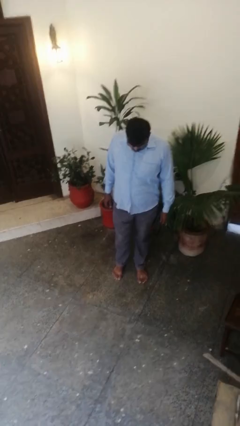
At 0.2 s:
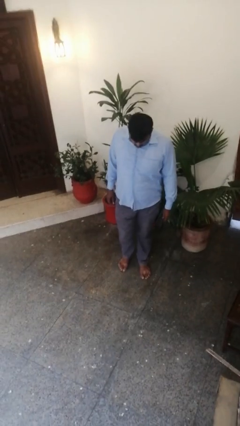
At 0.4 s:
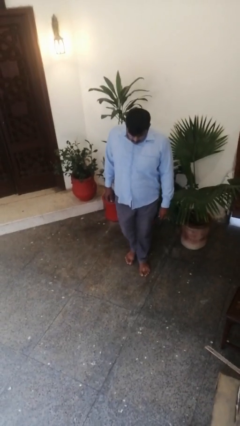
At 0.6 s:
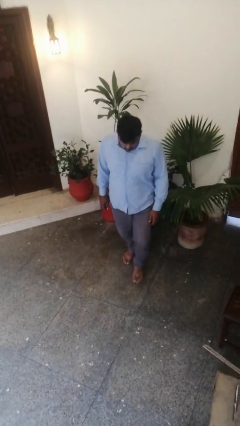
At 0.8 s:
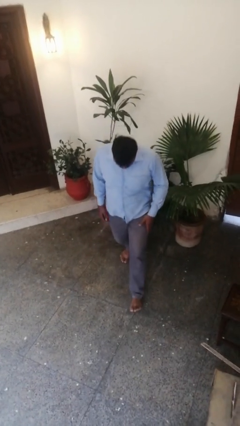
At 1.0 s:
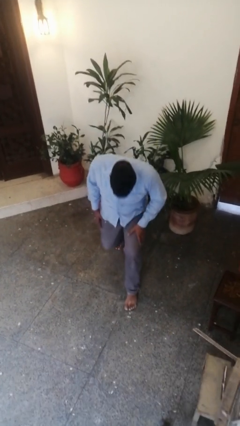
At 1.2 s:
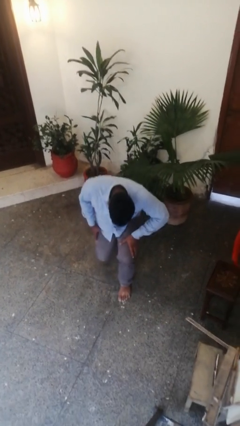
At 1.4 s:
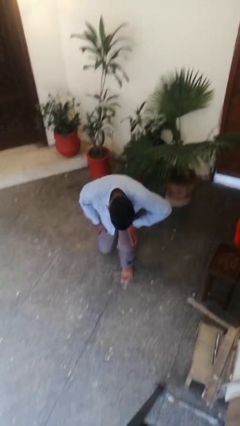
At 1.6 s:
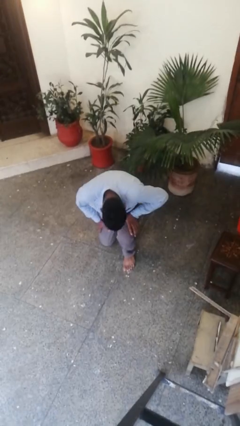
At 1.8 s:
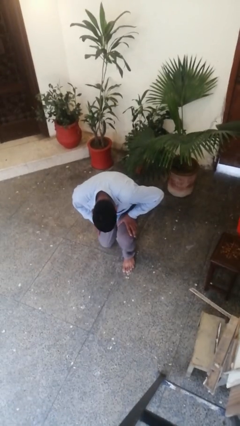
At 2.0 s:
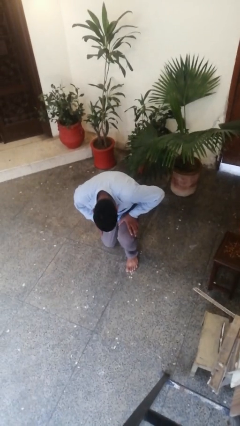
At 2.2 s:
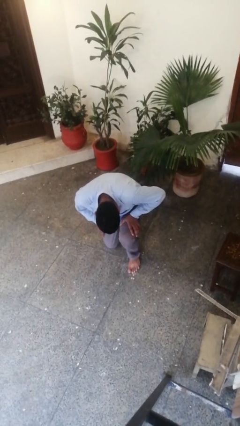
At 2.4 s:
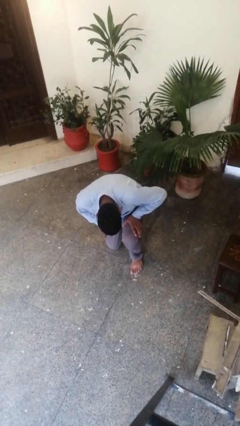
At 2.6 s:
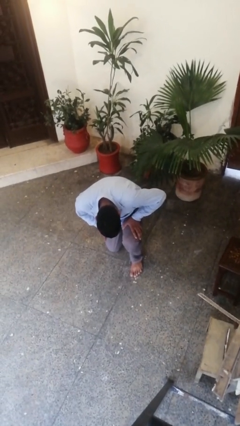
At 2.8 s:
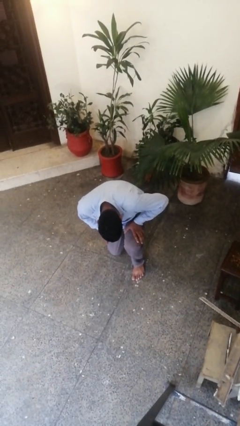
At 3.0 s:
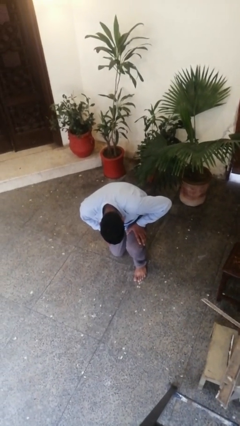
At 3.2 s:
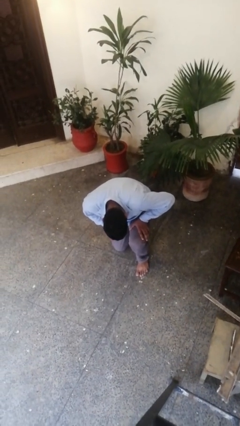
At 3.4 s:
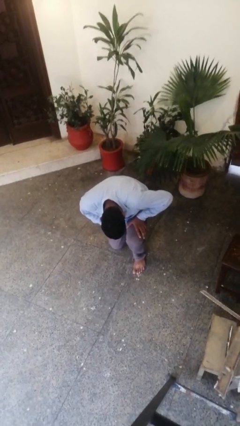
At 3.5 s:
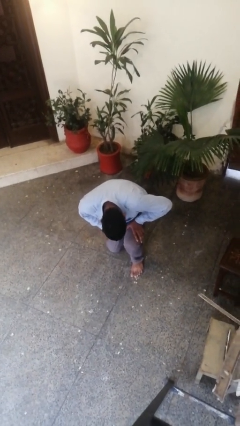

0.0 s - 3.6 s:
person kneels

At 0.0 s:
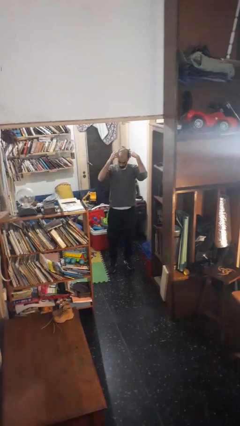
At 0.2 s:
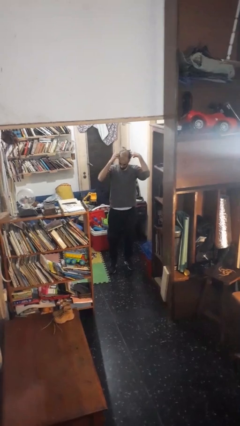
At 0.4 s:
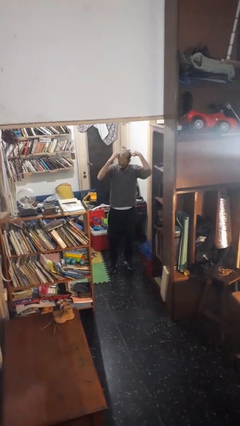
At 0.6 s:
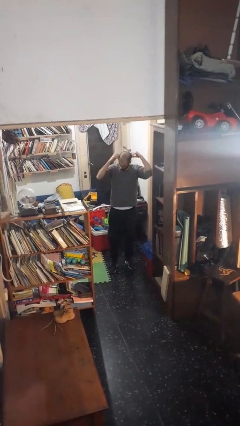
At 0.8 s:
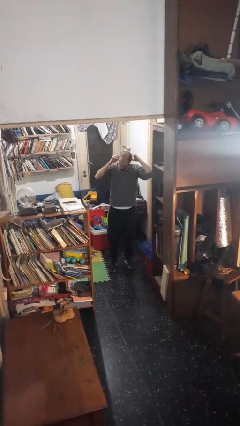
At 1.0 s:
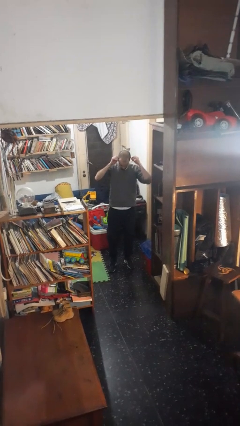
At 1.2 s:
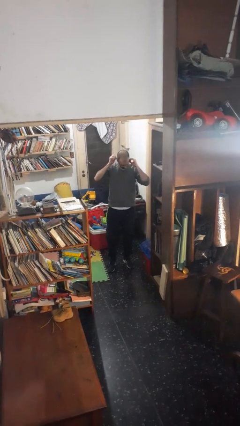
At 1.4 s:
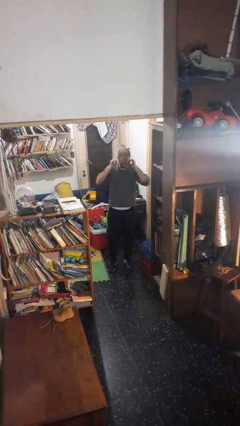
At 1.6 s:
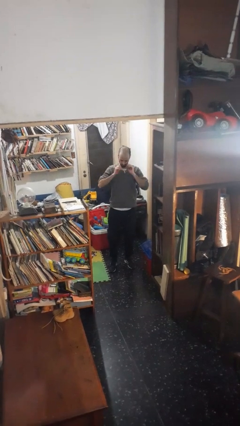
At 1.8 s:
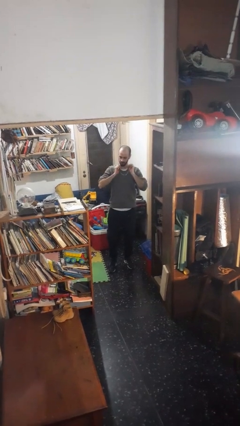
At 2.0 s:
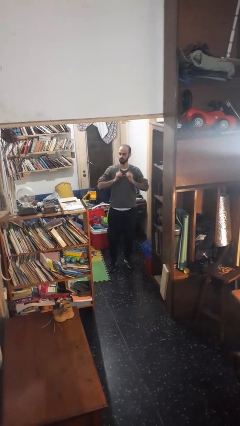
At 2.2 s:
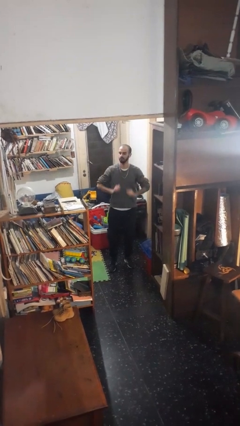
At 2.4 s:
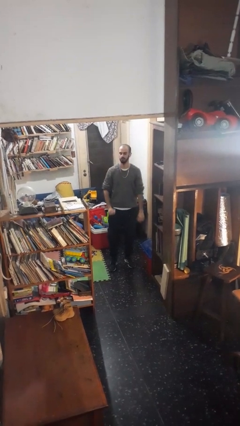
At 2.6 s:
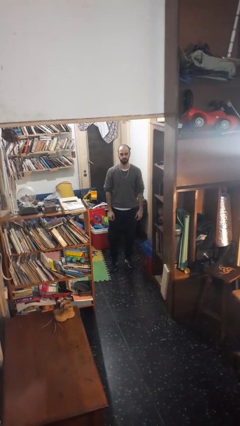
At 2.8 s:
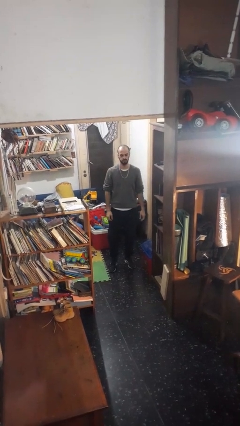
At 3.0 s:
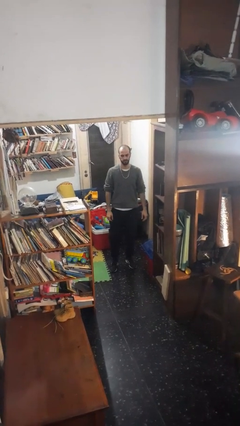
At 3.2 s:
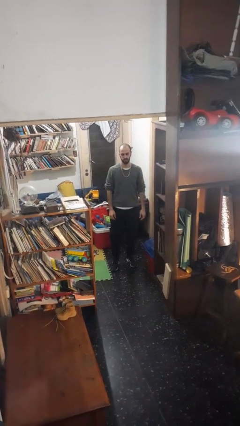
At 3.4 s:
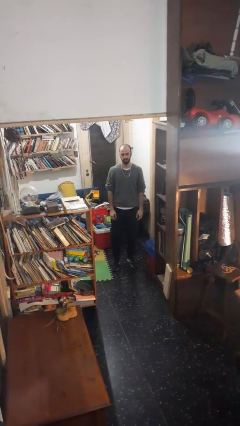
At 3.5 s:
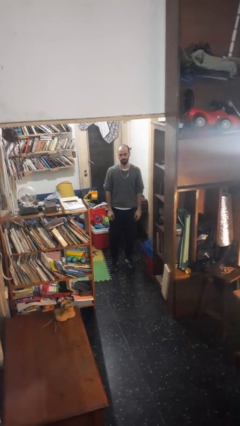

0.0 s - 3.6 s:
person puts on necklace

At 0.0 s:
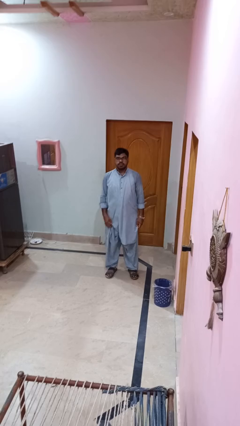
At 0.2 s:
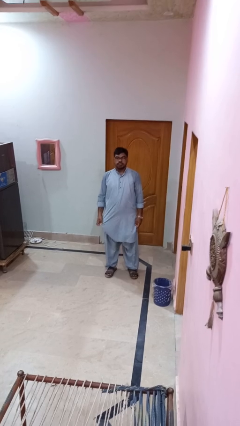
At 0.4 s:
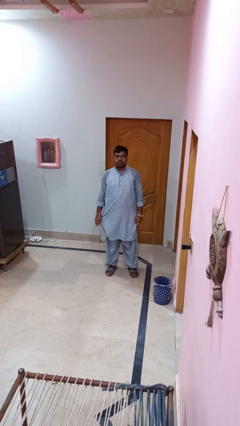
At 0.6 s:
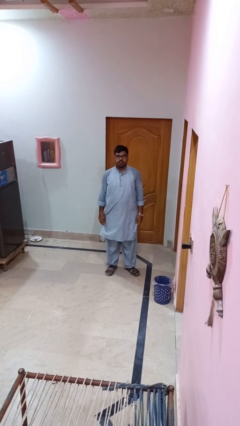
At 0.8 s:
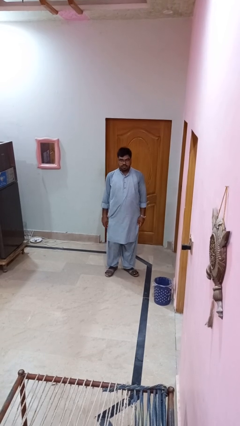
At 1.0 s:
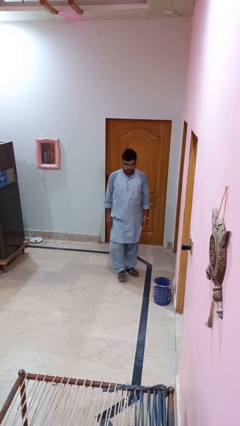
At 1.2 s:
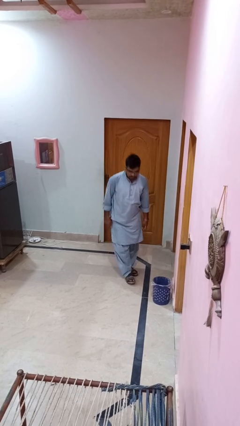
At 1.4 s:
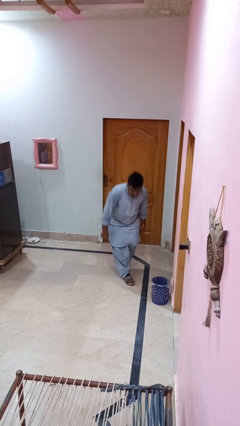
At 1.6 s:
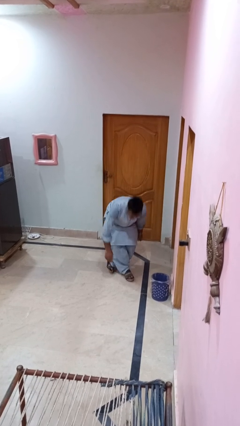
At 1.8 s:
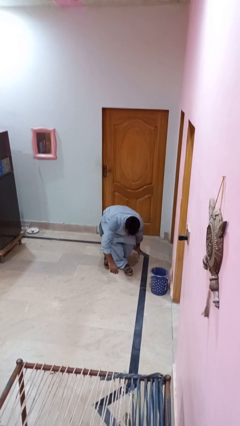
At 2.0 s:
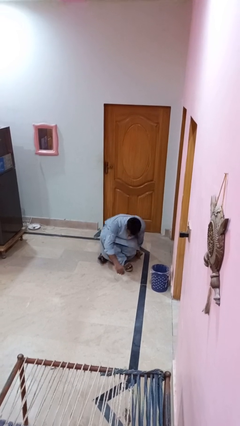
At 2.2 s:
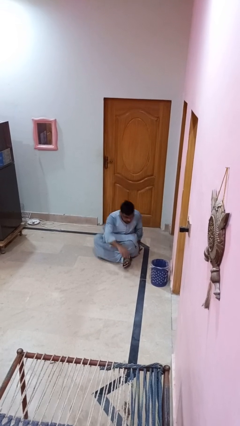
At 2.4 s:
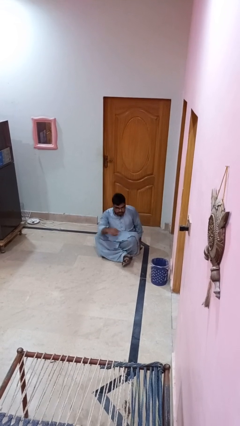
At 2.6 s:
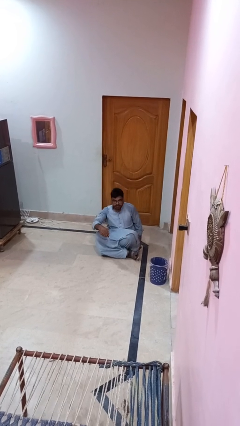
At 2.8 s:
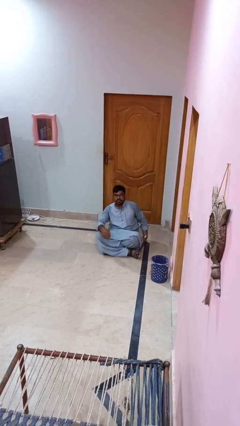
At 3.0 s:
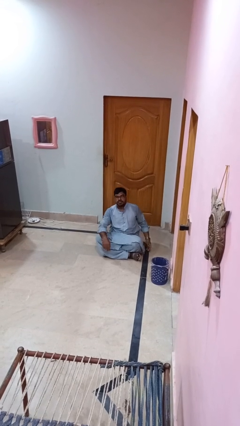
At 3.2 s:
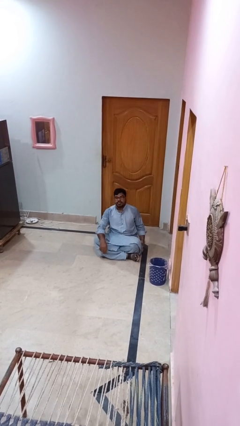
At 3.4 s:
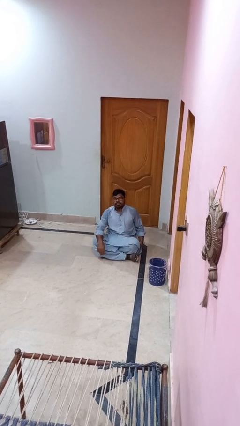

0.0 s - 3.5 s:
person sits crisscross

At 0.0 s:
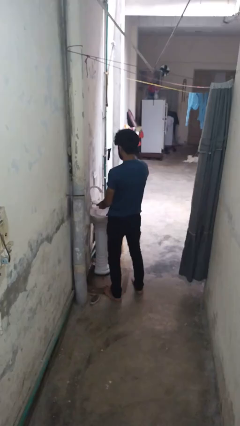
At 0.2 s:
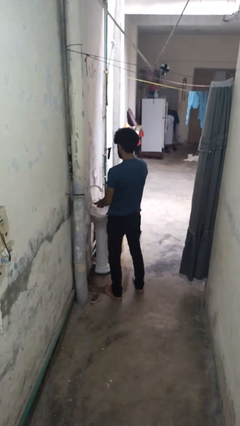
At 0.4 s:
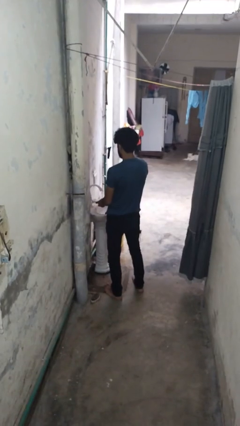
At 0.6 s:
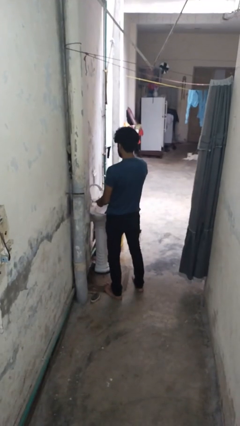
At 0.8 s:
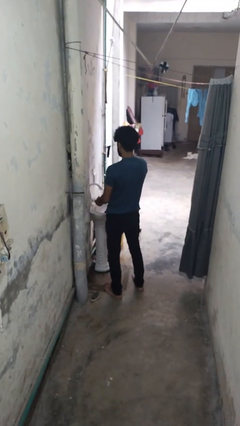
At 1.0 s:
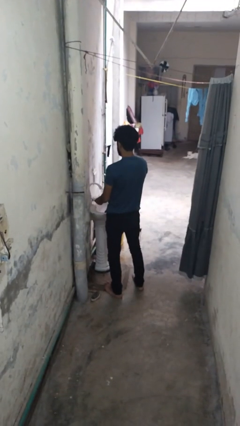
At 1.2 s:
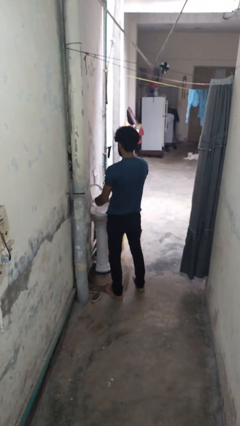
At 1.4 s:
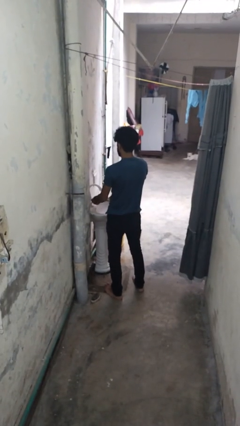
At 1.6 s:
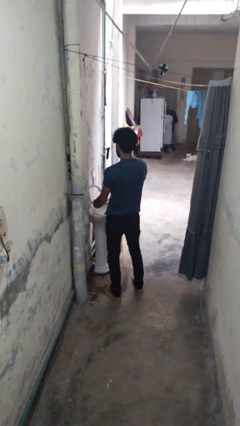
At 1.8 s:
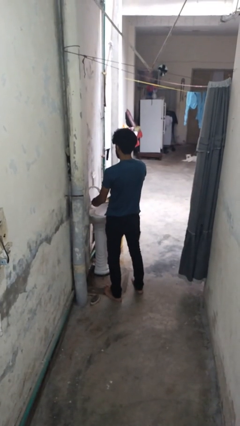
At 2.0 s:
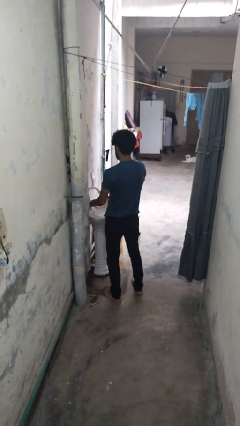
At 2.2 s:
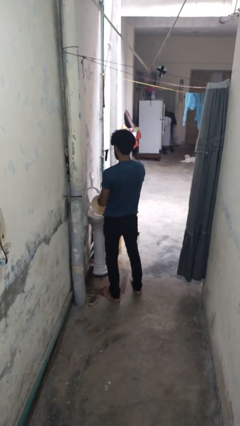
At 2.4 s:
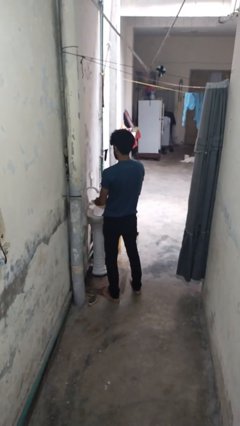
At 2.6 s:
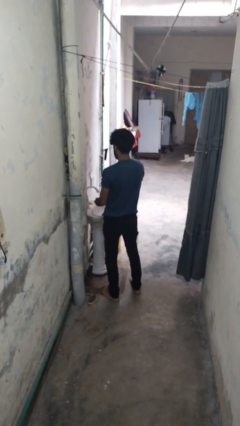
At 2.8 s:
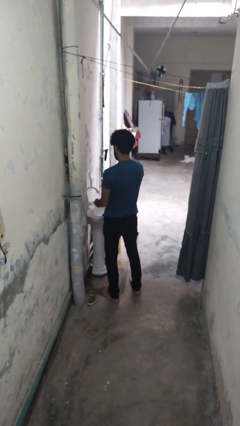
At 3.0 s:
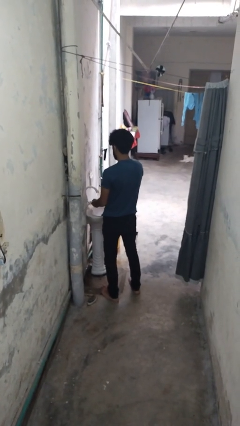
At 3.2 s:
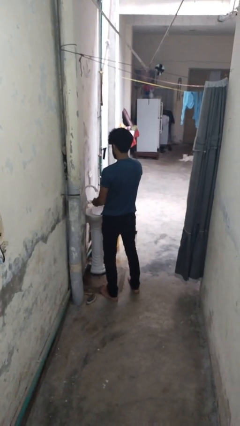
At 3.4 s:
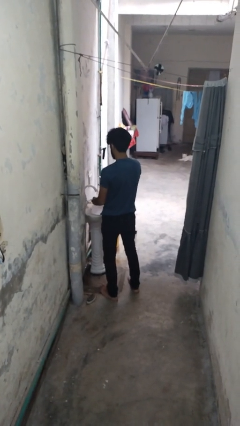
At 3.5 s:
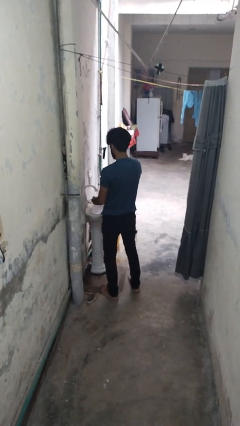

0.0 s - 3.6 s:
person washes dish

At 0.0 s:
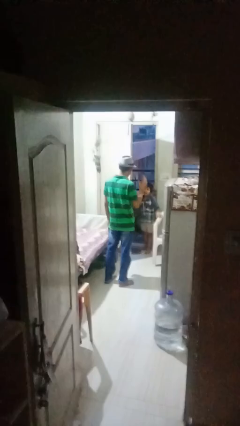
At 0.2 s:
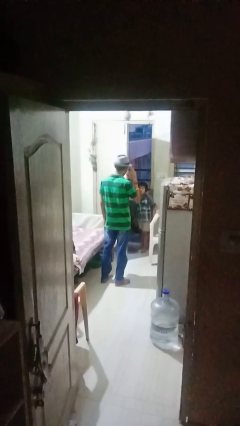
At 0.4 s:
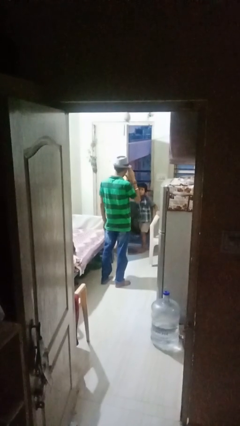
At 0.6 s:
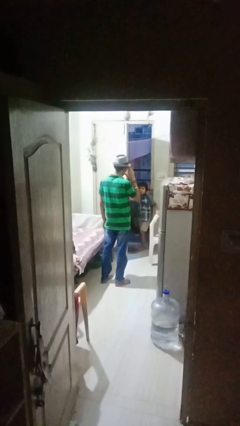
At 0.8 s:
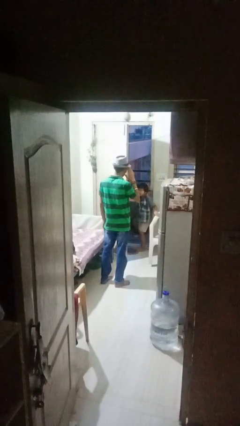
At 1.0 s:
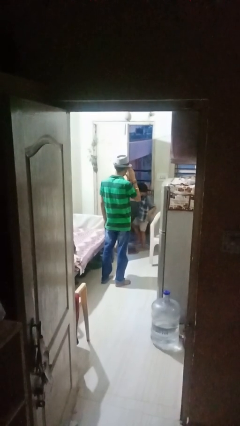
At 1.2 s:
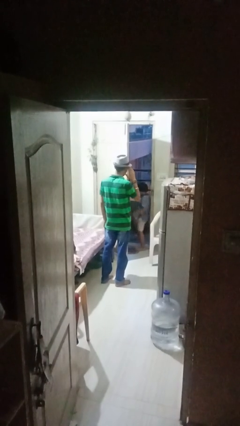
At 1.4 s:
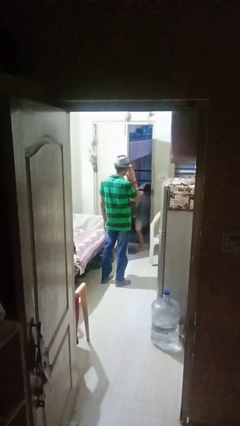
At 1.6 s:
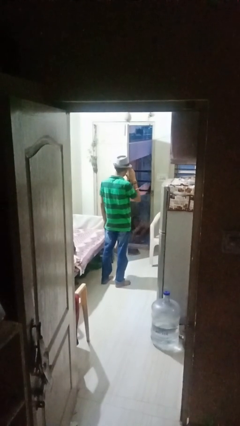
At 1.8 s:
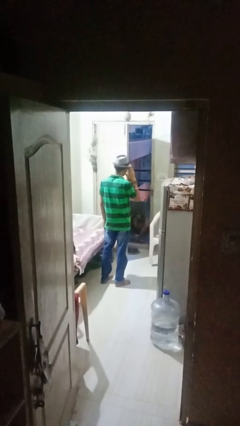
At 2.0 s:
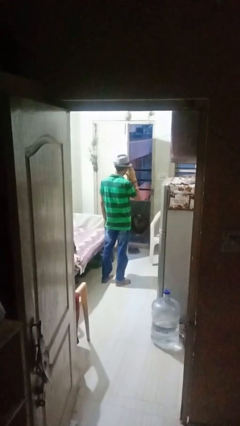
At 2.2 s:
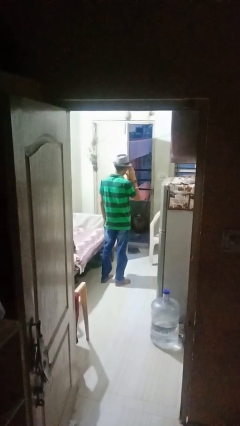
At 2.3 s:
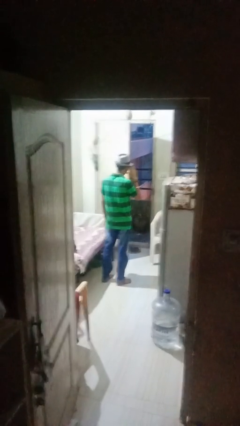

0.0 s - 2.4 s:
person salutes

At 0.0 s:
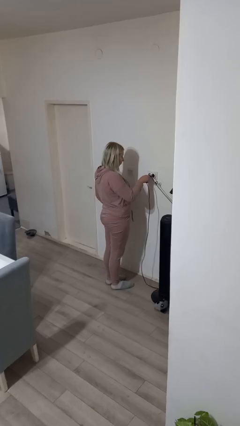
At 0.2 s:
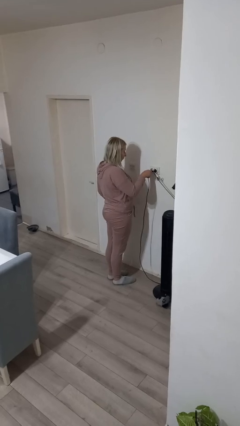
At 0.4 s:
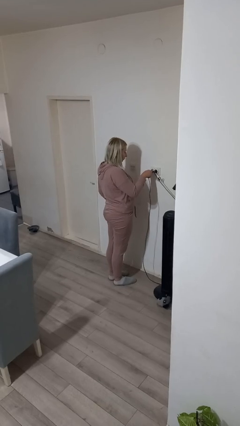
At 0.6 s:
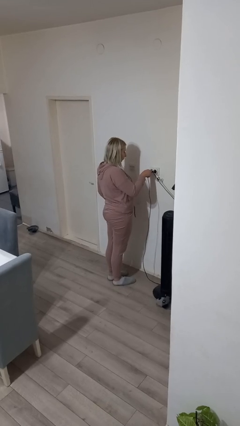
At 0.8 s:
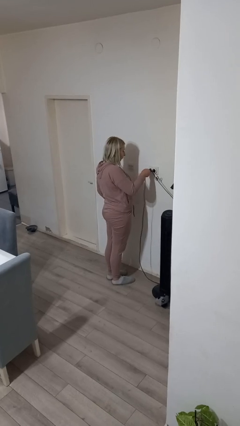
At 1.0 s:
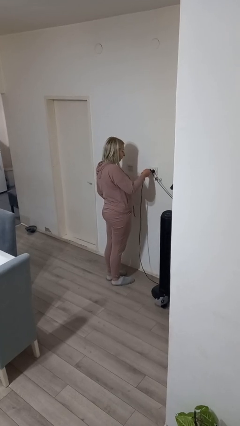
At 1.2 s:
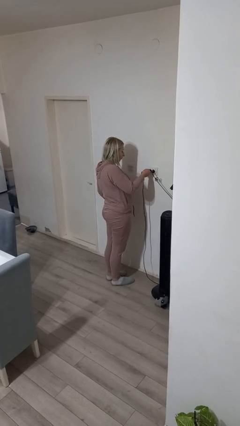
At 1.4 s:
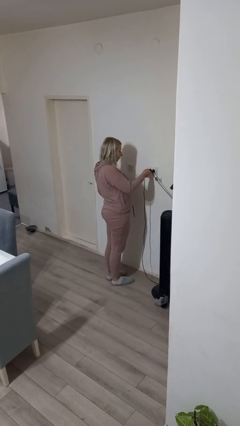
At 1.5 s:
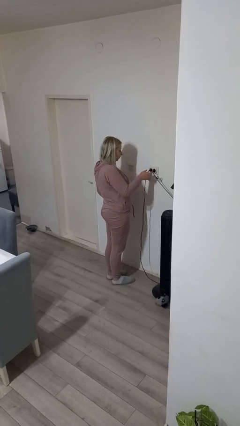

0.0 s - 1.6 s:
person plugs into electrical socket
